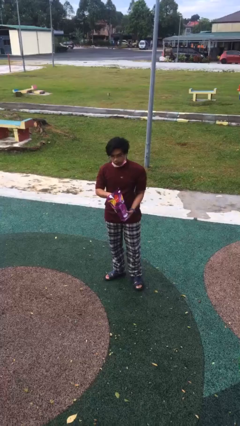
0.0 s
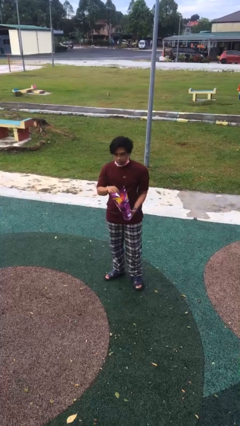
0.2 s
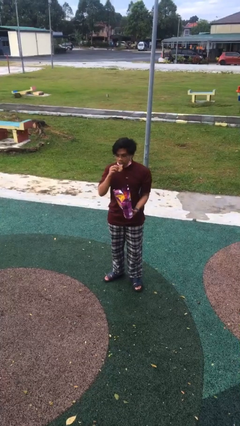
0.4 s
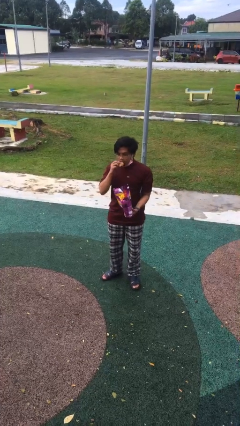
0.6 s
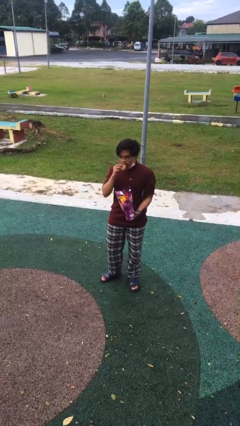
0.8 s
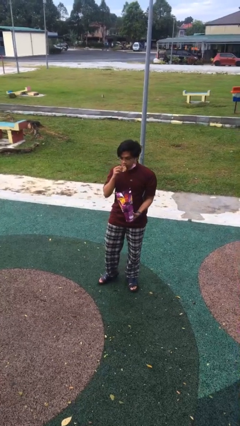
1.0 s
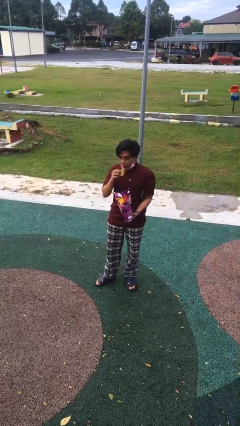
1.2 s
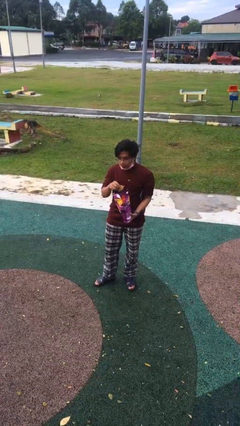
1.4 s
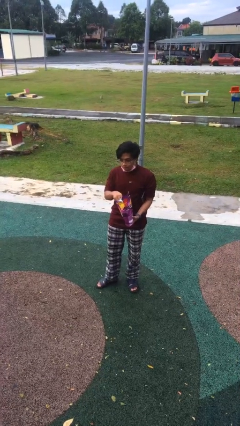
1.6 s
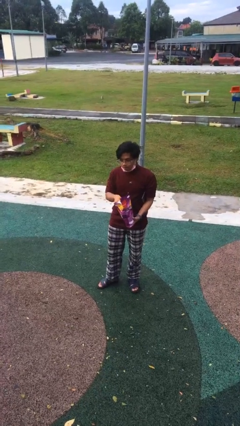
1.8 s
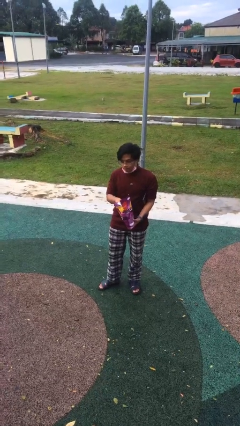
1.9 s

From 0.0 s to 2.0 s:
person eats snack from bag

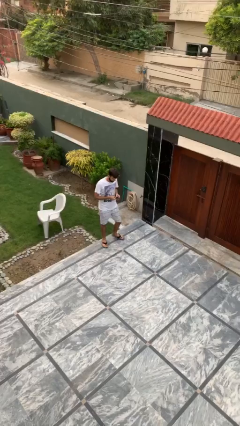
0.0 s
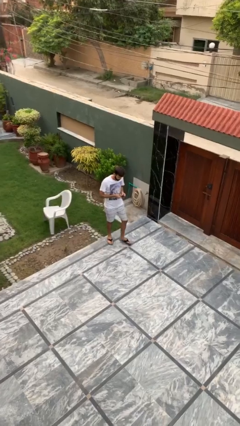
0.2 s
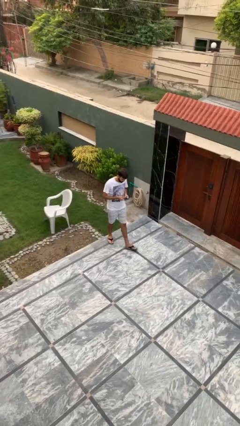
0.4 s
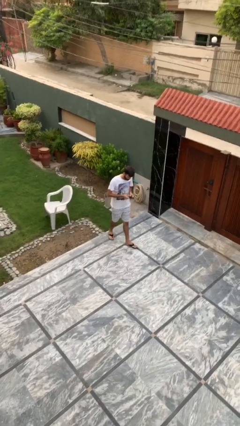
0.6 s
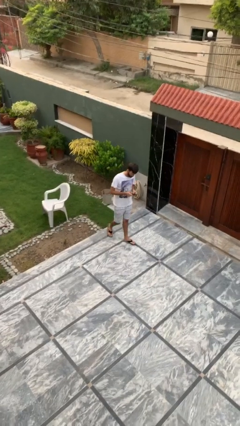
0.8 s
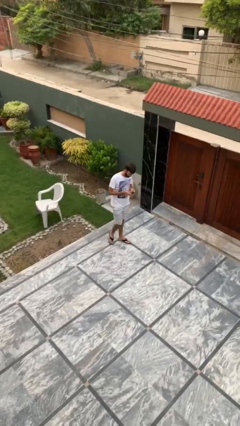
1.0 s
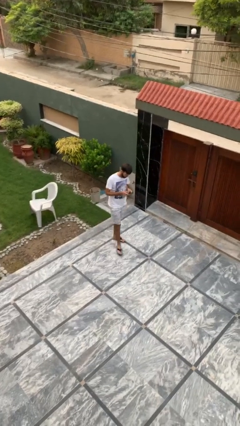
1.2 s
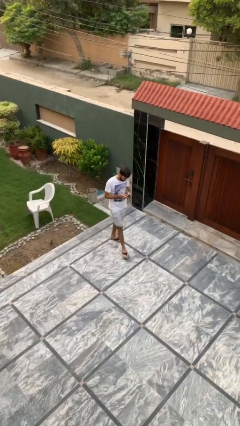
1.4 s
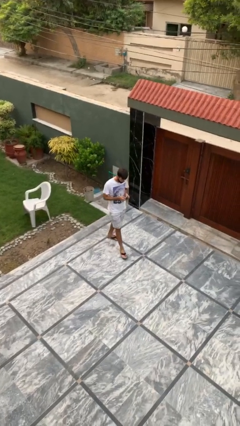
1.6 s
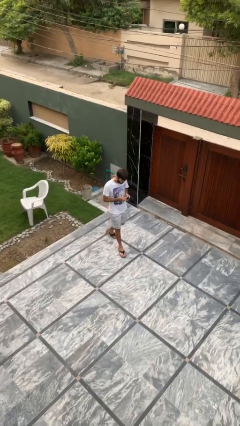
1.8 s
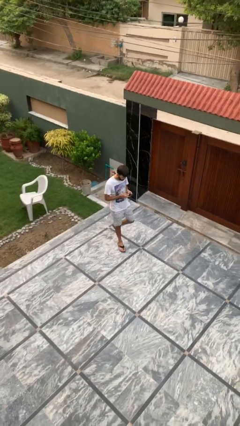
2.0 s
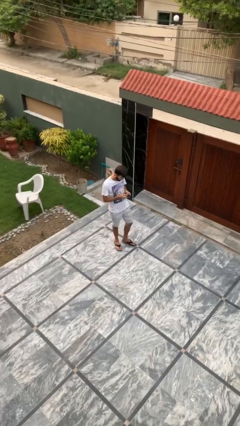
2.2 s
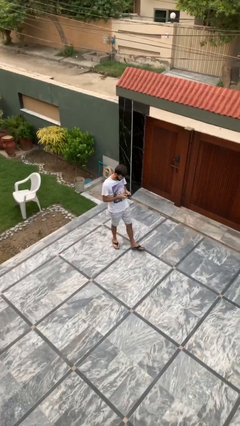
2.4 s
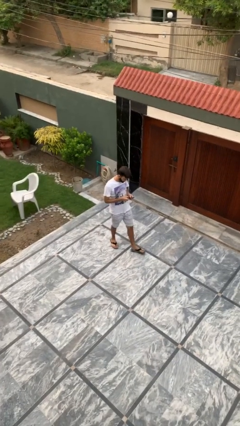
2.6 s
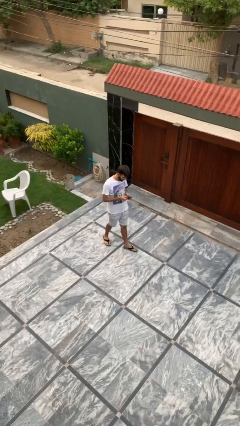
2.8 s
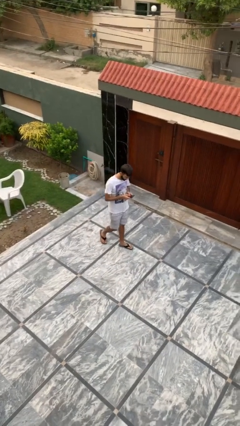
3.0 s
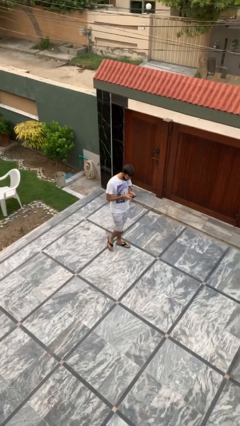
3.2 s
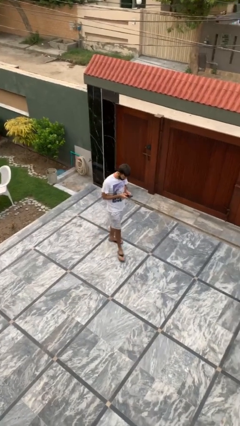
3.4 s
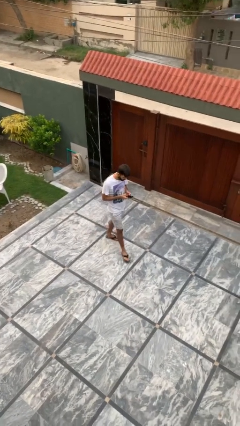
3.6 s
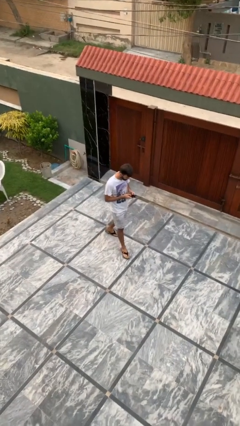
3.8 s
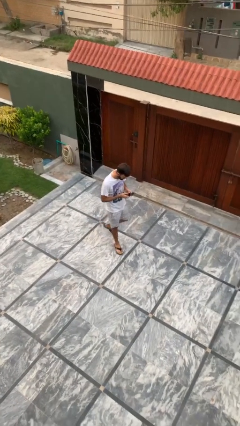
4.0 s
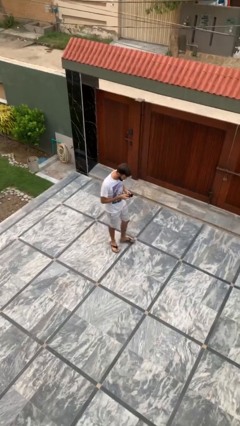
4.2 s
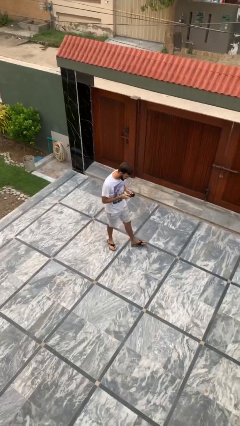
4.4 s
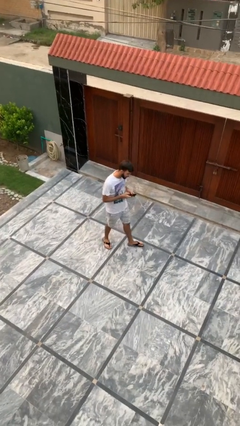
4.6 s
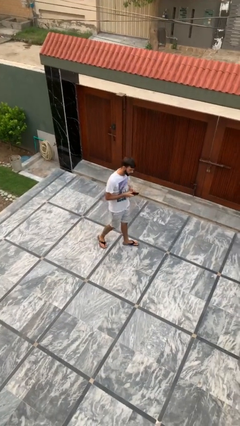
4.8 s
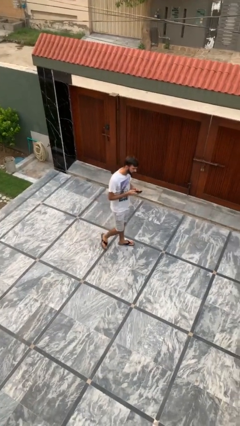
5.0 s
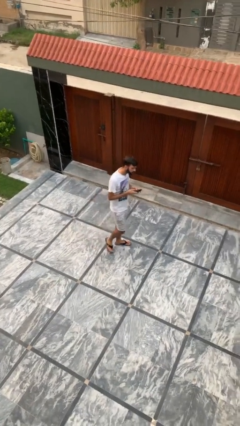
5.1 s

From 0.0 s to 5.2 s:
person texts on phone

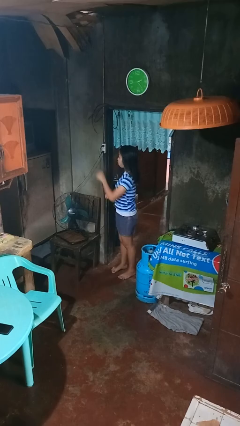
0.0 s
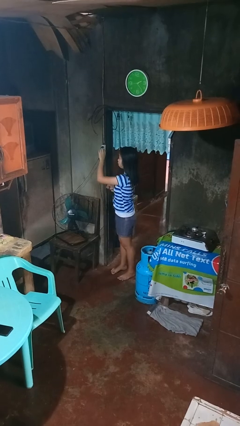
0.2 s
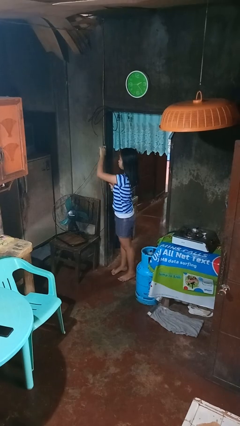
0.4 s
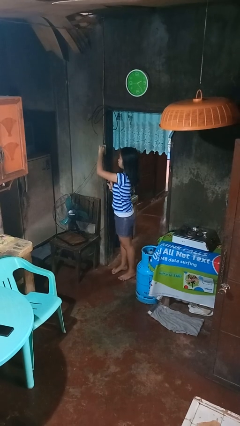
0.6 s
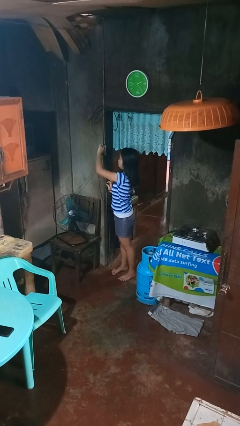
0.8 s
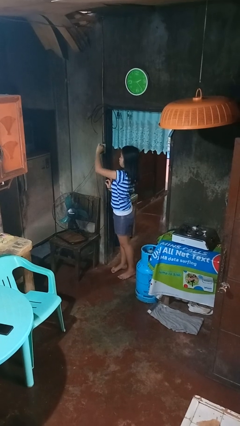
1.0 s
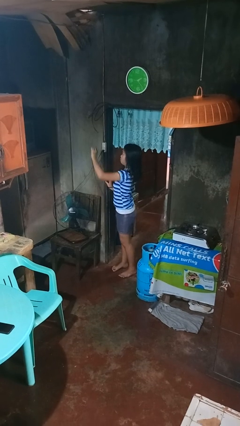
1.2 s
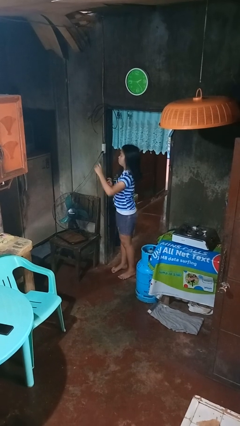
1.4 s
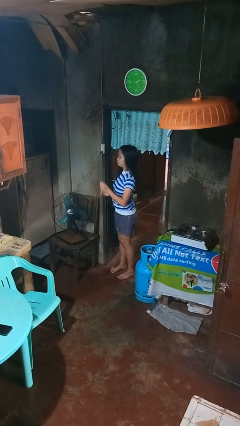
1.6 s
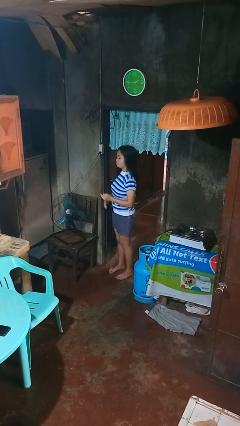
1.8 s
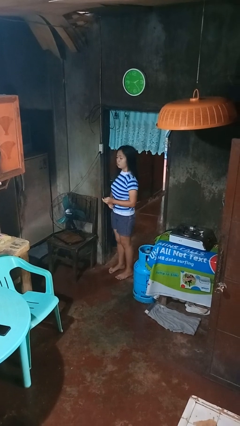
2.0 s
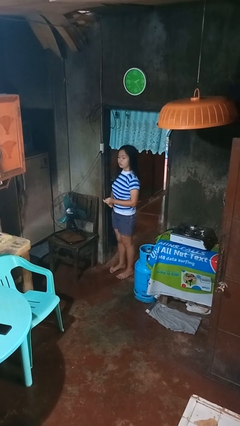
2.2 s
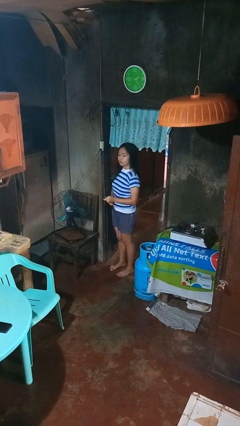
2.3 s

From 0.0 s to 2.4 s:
person unplugs from electrical socket

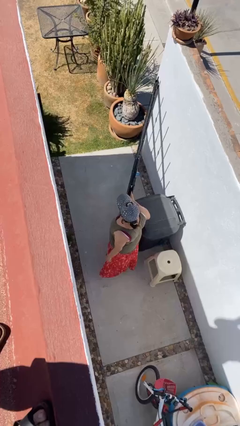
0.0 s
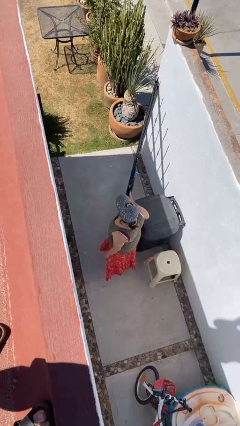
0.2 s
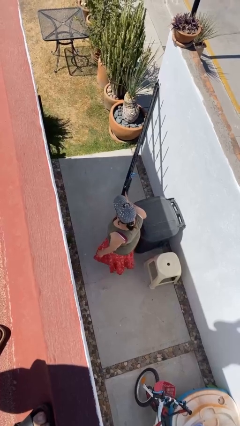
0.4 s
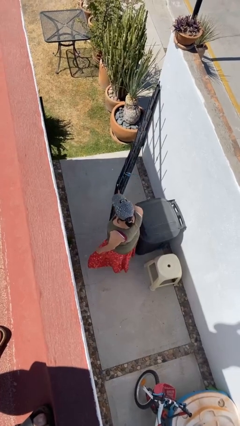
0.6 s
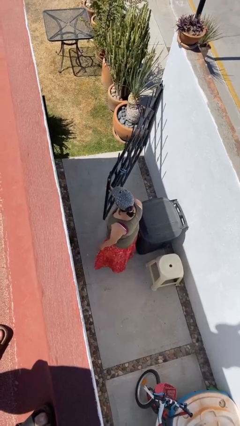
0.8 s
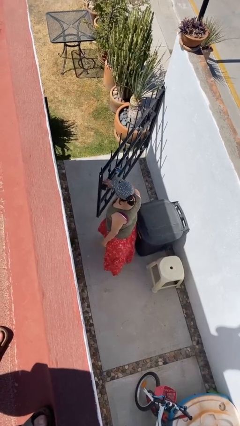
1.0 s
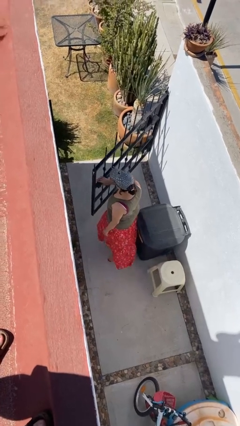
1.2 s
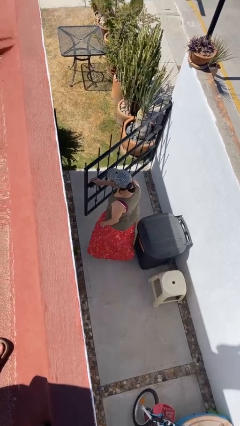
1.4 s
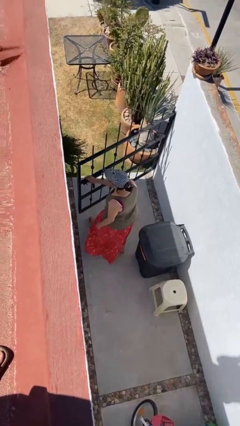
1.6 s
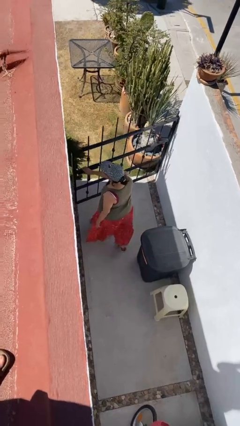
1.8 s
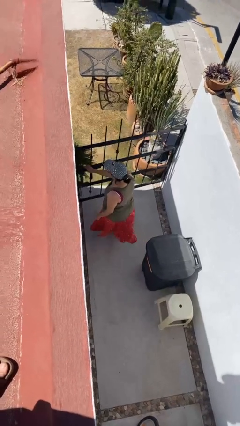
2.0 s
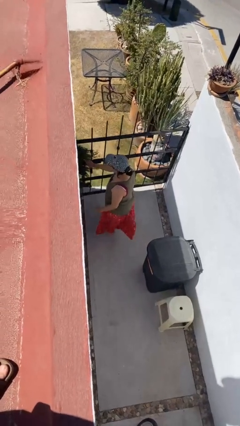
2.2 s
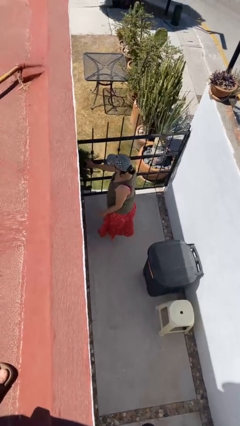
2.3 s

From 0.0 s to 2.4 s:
person closes facility door

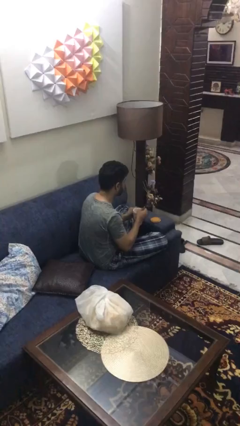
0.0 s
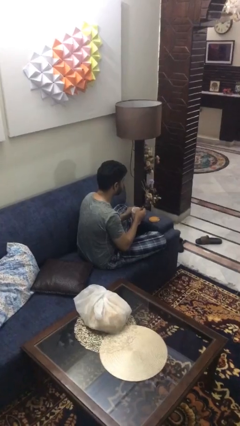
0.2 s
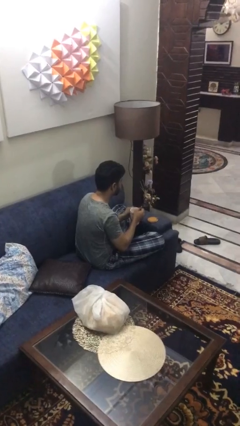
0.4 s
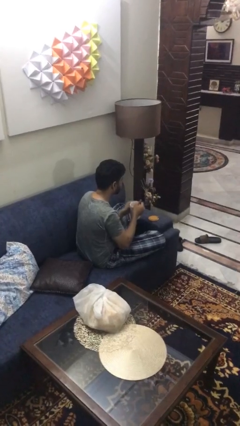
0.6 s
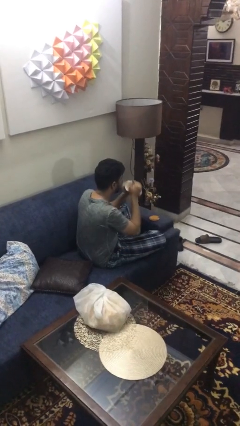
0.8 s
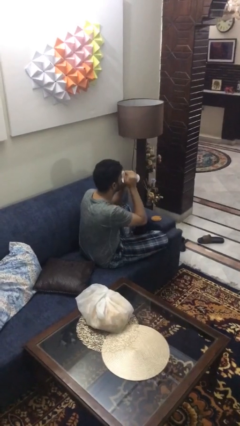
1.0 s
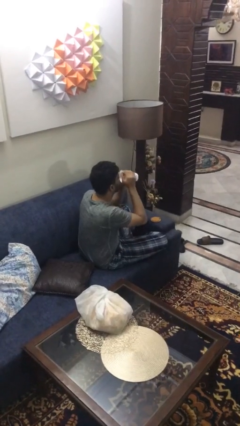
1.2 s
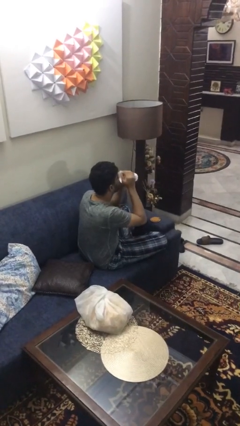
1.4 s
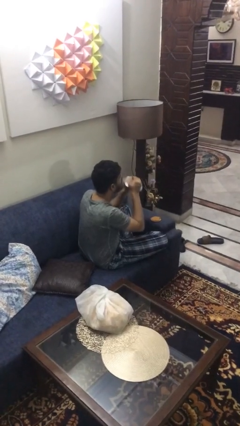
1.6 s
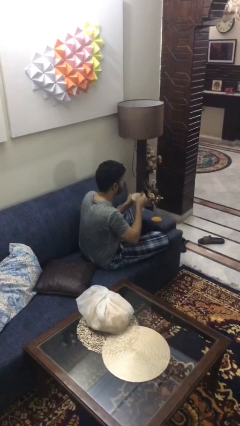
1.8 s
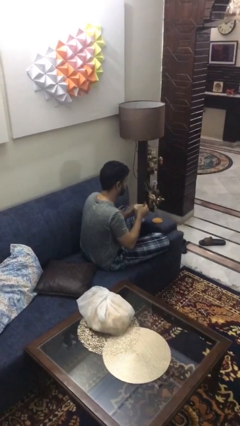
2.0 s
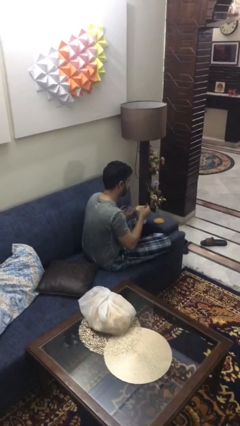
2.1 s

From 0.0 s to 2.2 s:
person drinks from mug

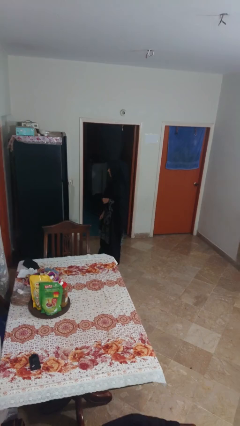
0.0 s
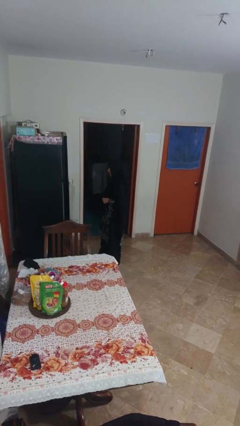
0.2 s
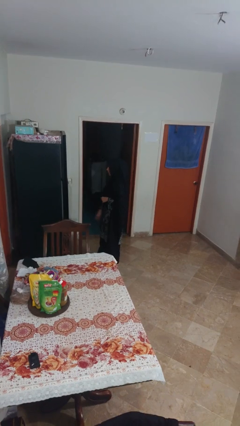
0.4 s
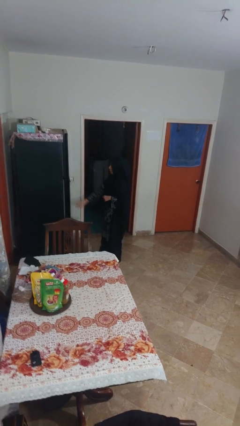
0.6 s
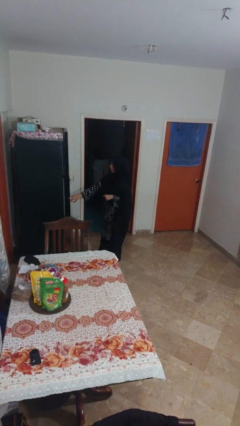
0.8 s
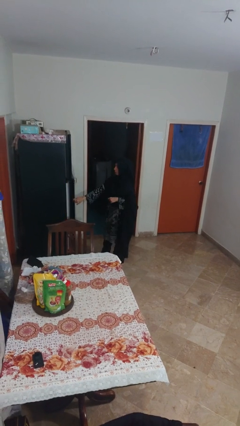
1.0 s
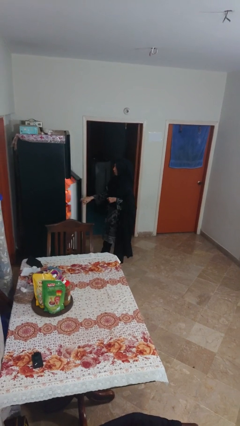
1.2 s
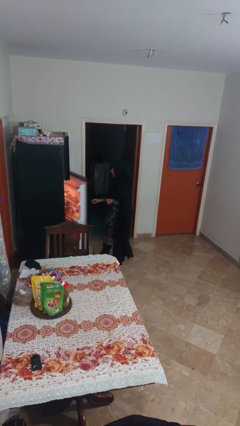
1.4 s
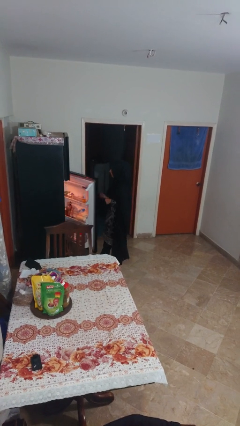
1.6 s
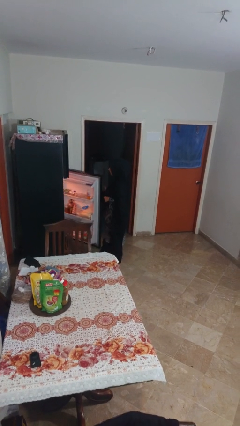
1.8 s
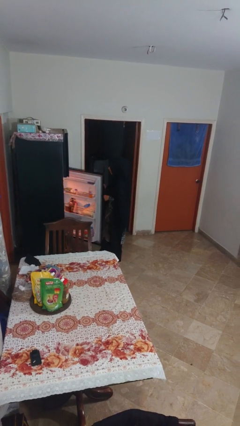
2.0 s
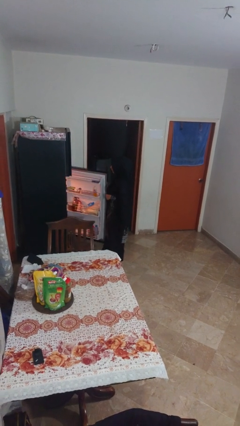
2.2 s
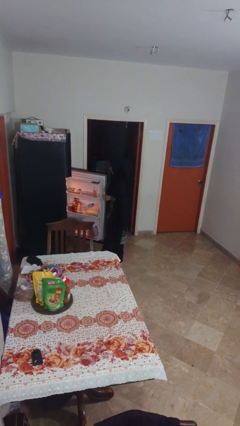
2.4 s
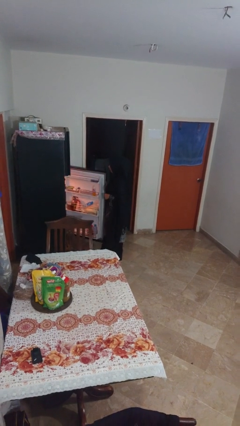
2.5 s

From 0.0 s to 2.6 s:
person opens refrigerator

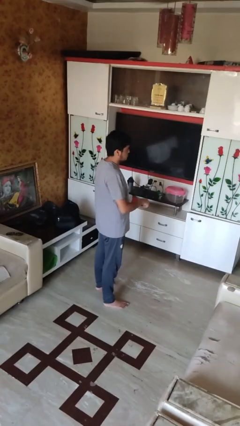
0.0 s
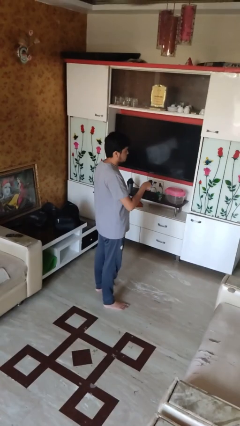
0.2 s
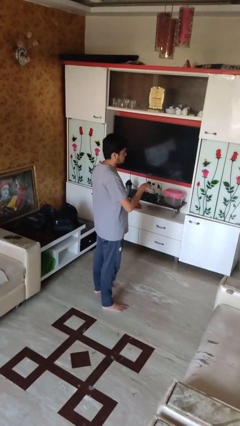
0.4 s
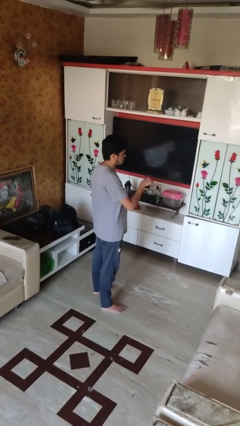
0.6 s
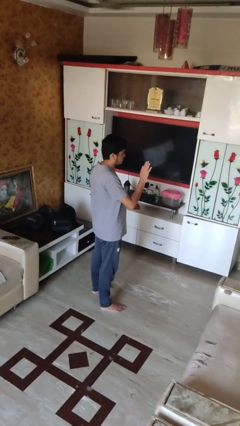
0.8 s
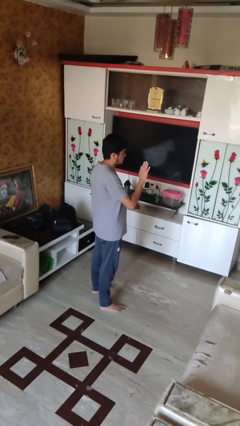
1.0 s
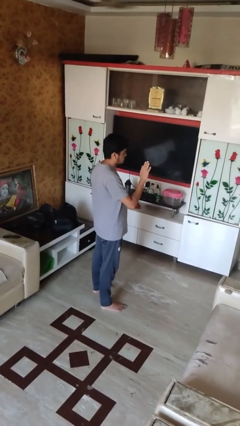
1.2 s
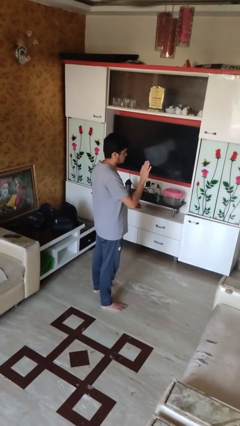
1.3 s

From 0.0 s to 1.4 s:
person gestures swipe up
